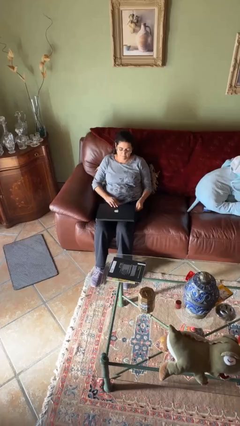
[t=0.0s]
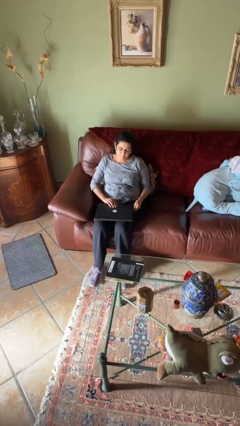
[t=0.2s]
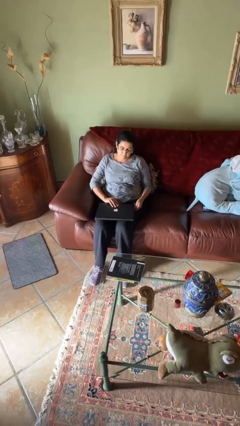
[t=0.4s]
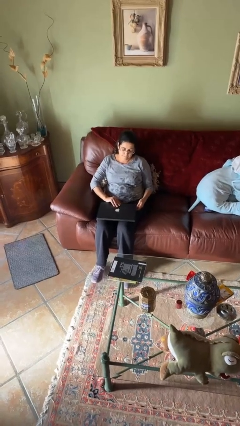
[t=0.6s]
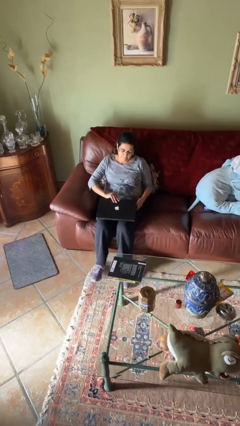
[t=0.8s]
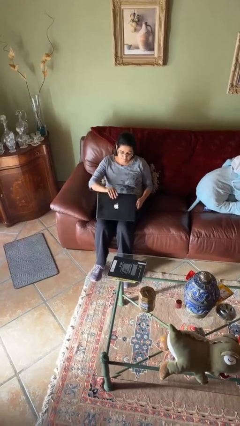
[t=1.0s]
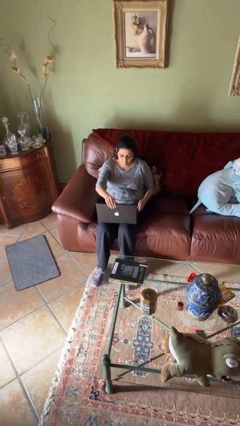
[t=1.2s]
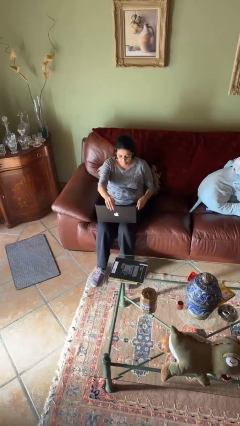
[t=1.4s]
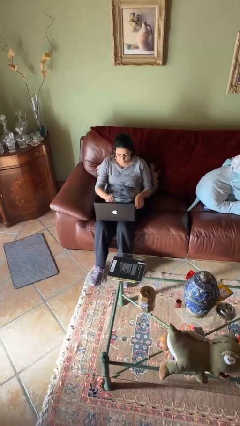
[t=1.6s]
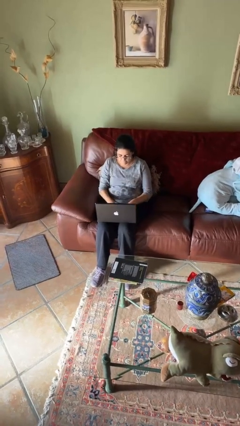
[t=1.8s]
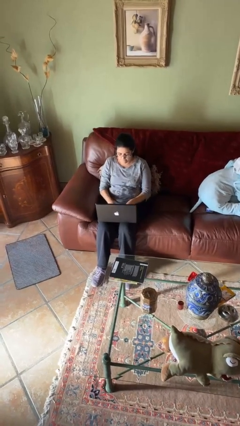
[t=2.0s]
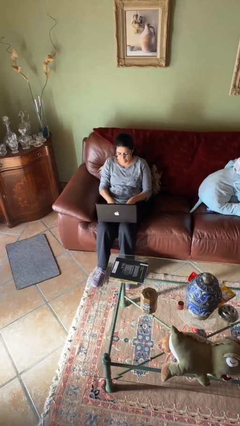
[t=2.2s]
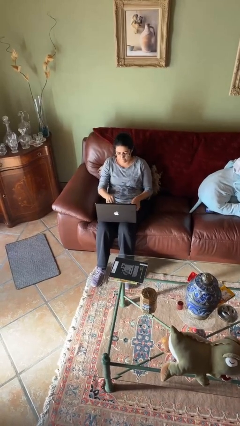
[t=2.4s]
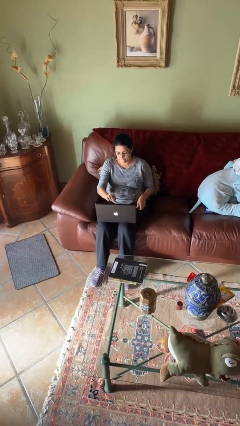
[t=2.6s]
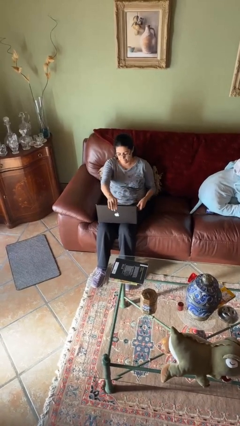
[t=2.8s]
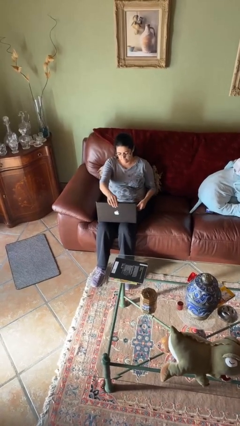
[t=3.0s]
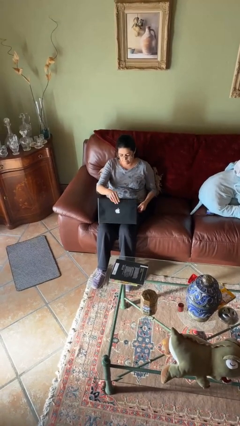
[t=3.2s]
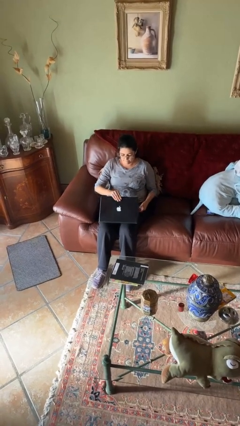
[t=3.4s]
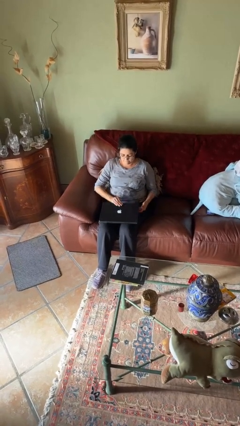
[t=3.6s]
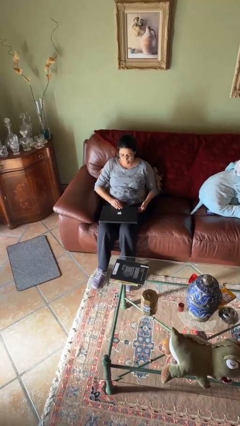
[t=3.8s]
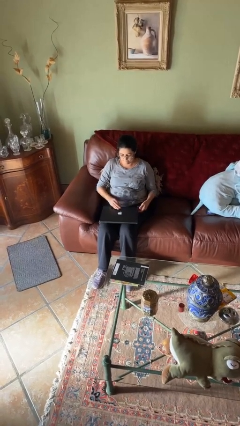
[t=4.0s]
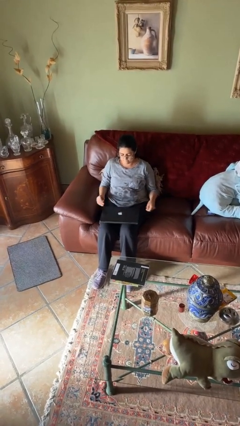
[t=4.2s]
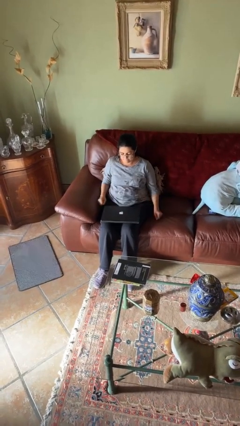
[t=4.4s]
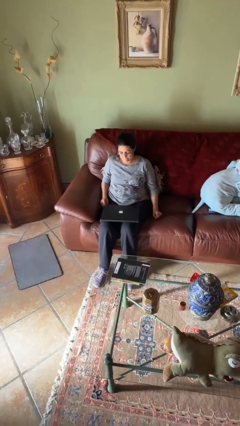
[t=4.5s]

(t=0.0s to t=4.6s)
person interacts with laptop

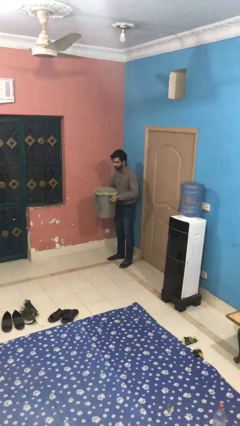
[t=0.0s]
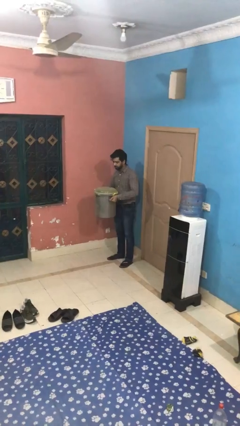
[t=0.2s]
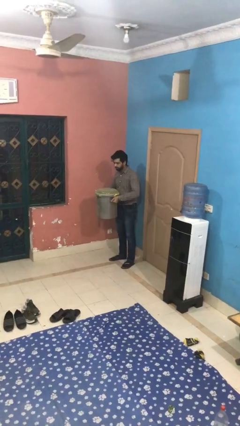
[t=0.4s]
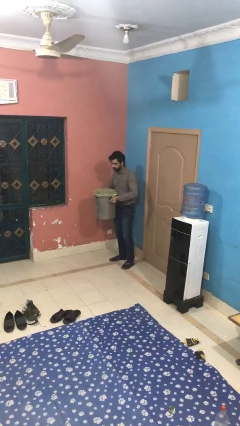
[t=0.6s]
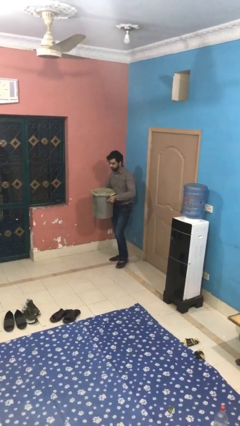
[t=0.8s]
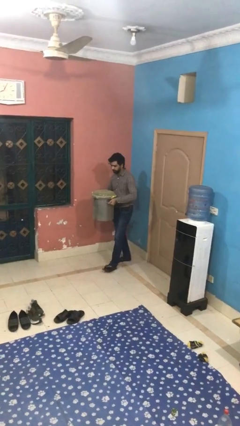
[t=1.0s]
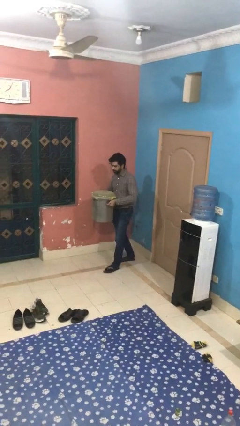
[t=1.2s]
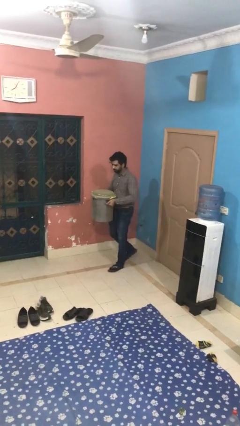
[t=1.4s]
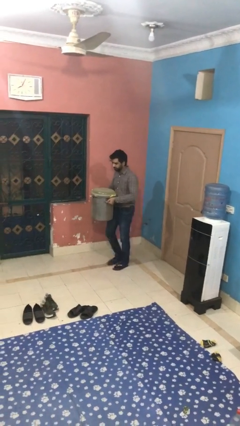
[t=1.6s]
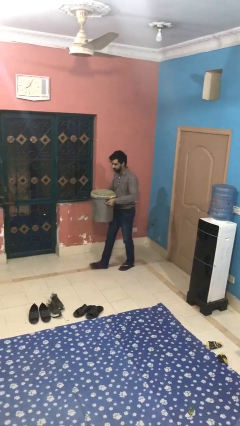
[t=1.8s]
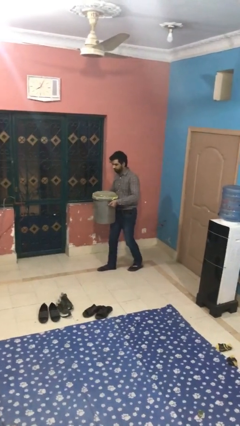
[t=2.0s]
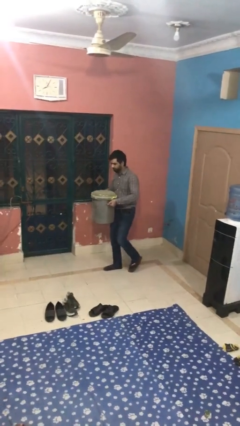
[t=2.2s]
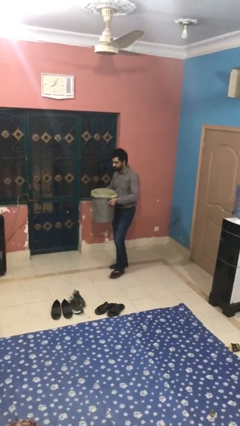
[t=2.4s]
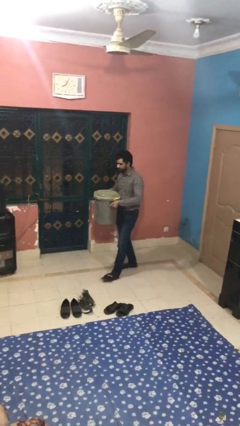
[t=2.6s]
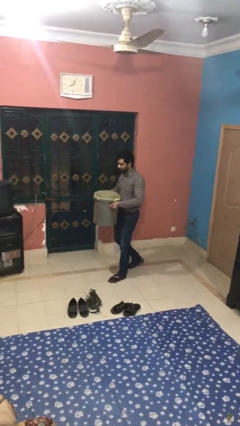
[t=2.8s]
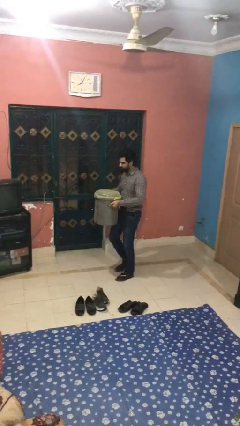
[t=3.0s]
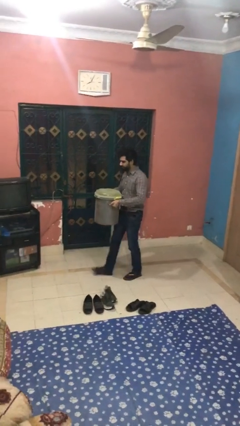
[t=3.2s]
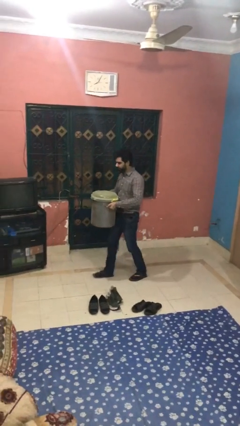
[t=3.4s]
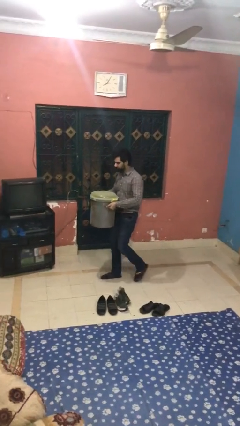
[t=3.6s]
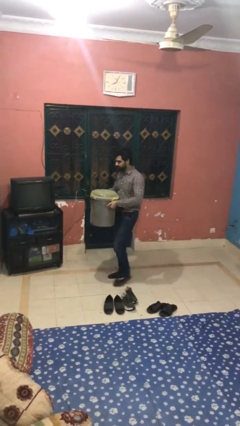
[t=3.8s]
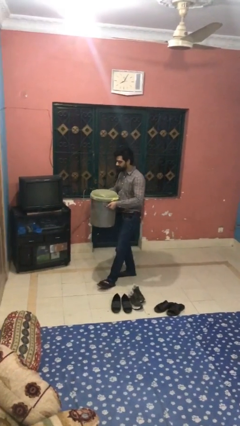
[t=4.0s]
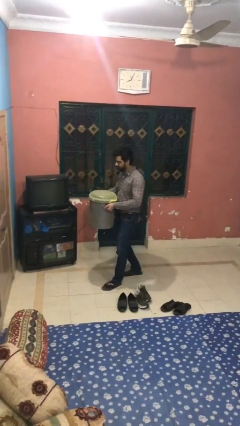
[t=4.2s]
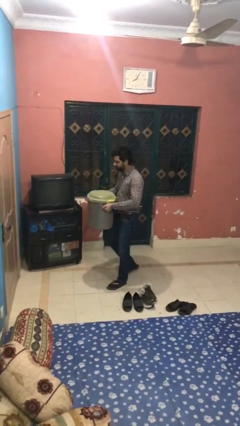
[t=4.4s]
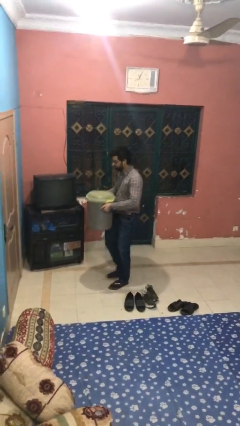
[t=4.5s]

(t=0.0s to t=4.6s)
person carries heavy object

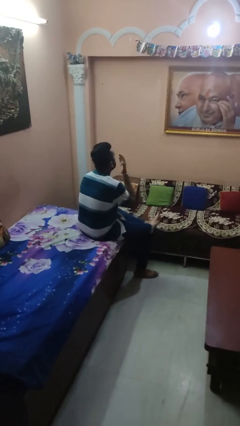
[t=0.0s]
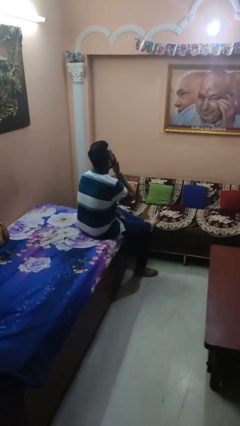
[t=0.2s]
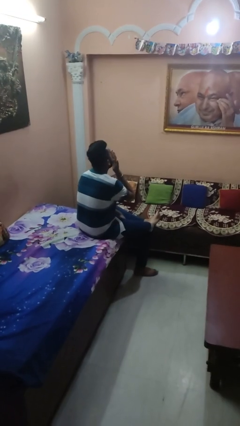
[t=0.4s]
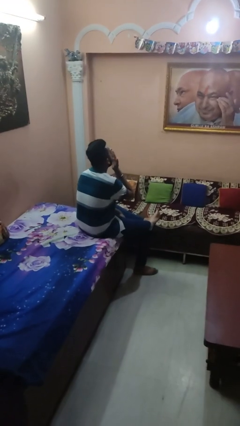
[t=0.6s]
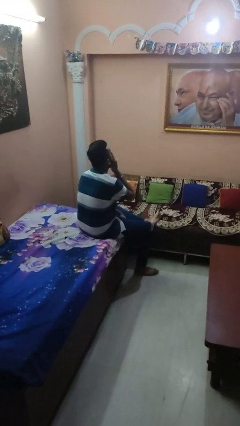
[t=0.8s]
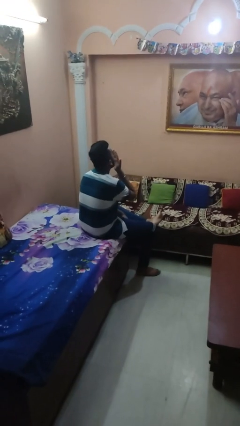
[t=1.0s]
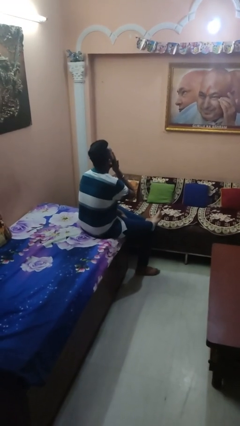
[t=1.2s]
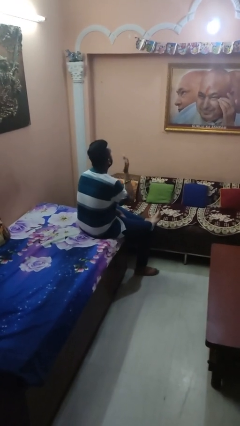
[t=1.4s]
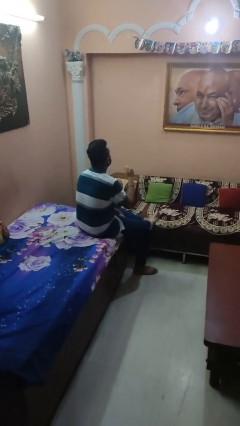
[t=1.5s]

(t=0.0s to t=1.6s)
person yawns

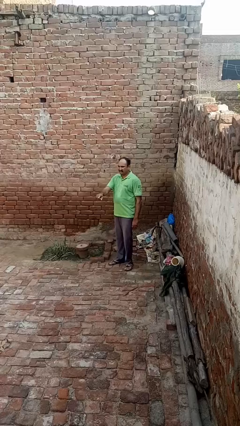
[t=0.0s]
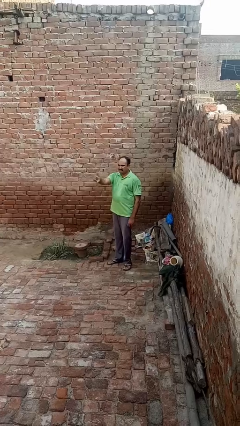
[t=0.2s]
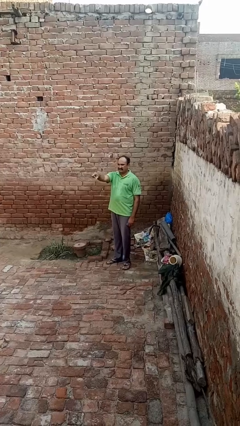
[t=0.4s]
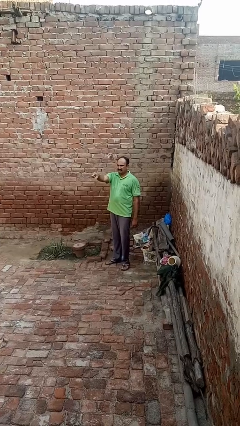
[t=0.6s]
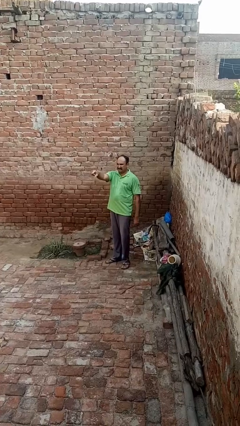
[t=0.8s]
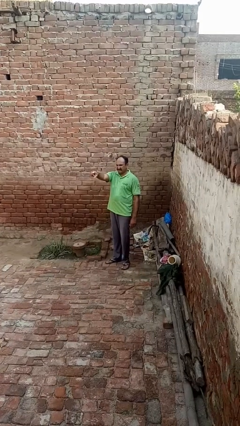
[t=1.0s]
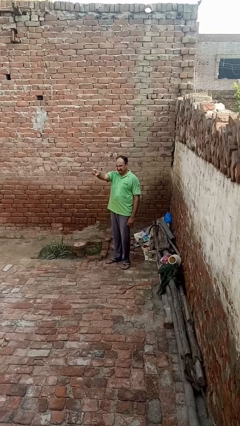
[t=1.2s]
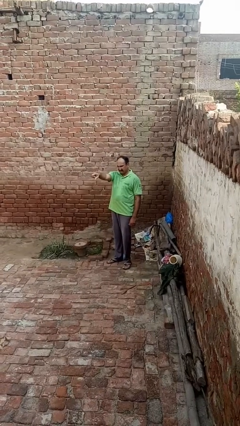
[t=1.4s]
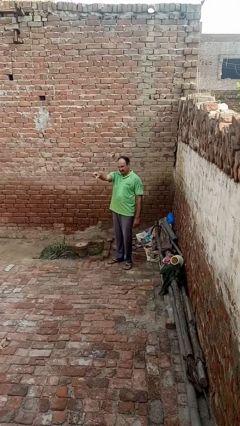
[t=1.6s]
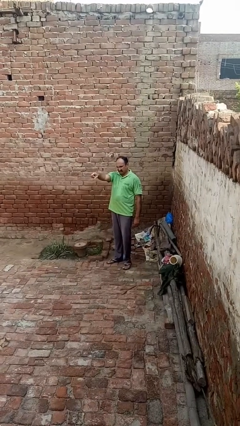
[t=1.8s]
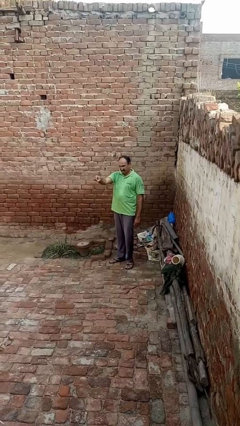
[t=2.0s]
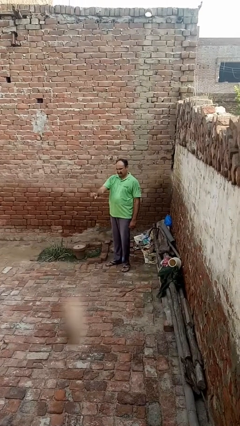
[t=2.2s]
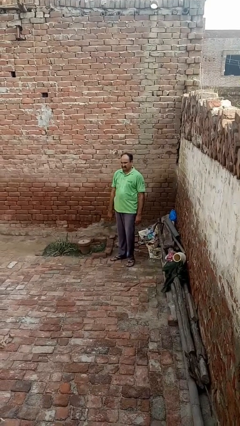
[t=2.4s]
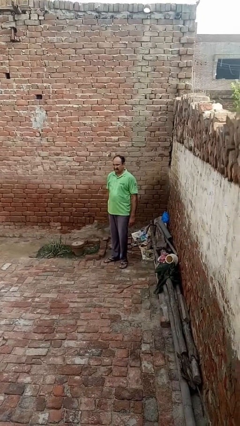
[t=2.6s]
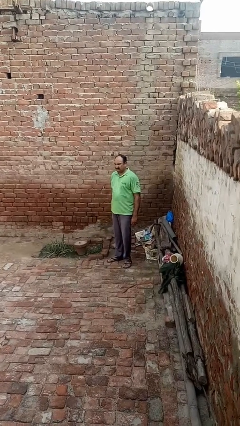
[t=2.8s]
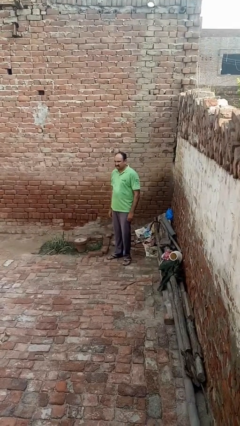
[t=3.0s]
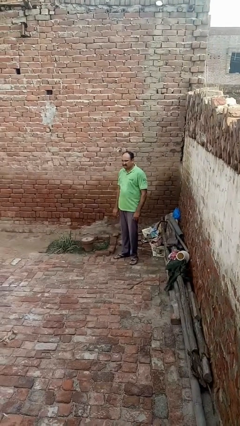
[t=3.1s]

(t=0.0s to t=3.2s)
person points at person

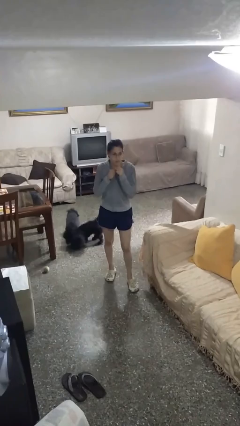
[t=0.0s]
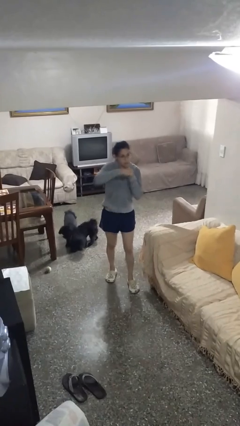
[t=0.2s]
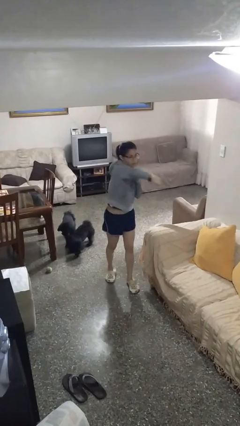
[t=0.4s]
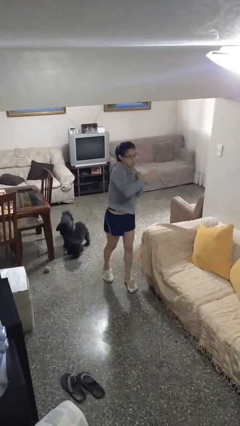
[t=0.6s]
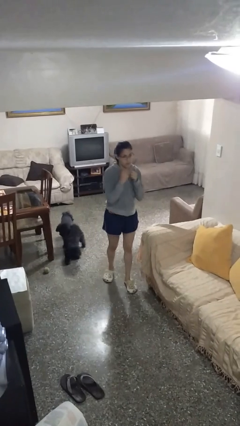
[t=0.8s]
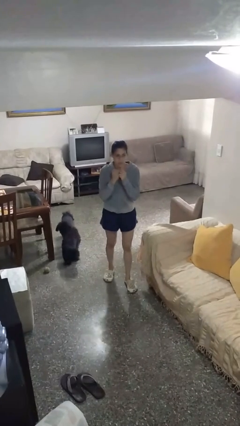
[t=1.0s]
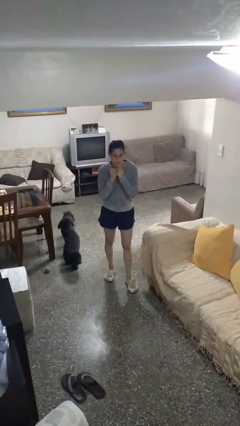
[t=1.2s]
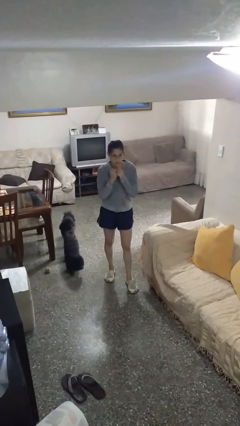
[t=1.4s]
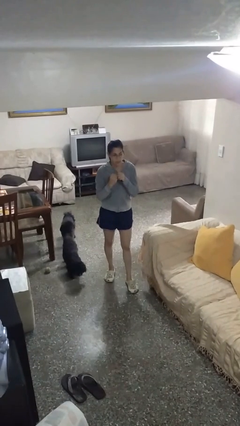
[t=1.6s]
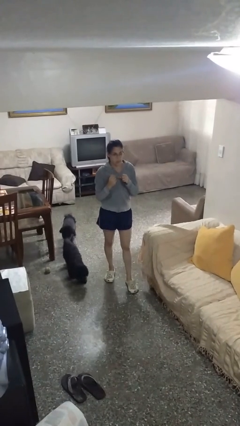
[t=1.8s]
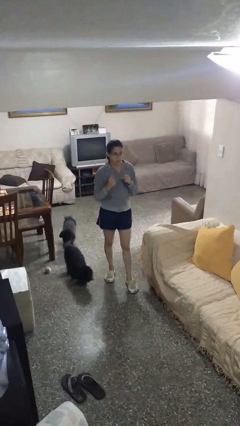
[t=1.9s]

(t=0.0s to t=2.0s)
person karate chop

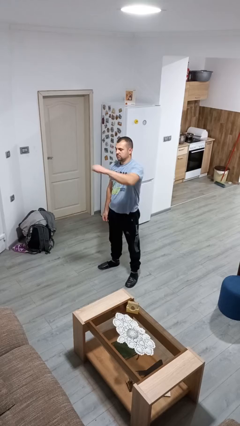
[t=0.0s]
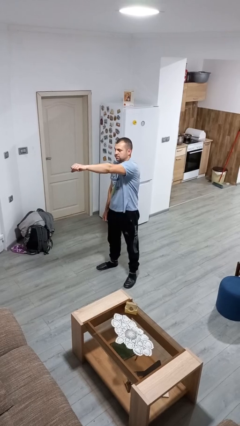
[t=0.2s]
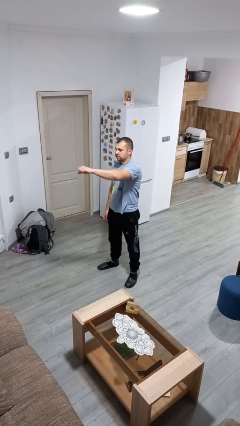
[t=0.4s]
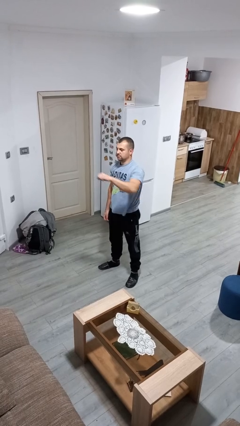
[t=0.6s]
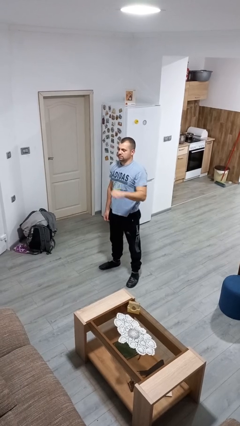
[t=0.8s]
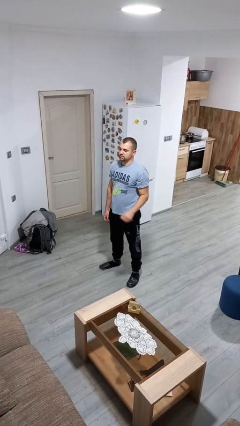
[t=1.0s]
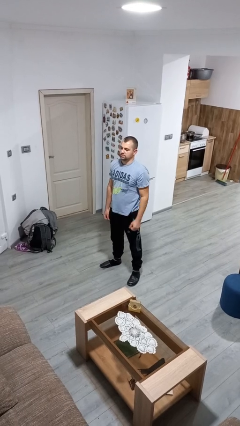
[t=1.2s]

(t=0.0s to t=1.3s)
person punches
